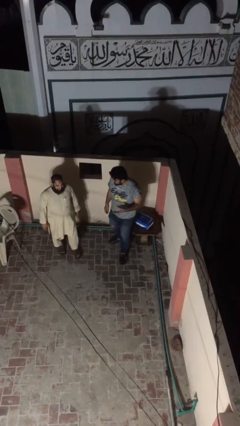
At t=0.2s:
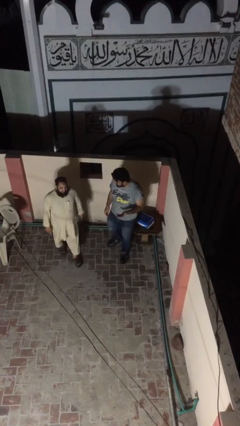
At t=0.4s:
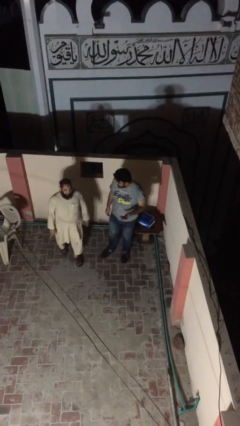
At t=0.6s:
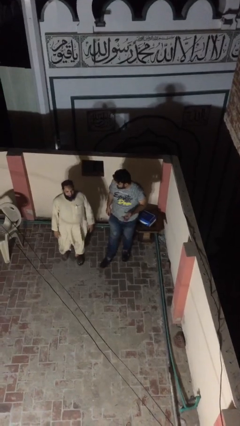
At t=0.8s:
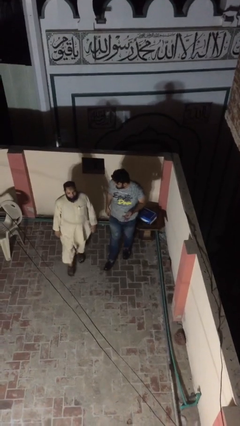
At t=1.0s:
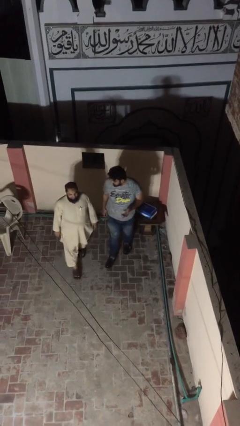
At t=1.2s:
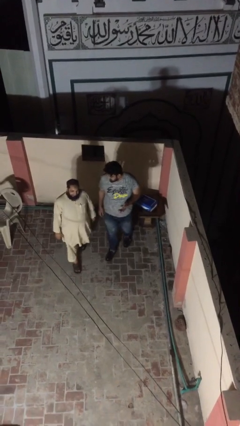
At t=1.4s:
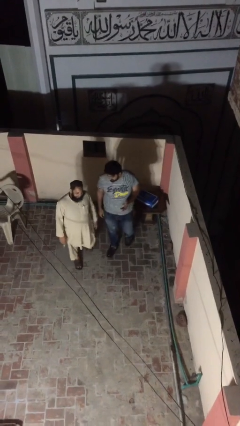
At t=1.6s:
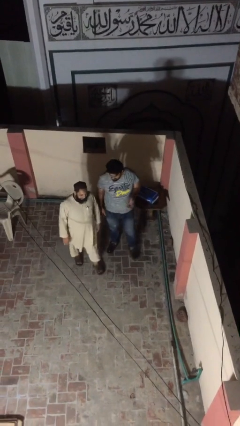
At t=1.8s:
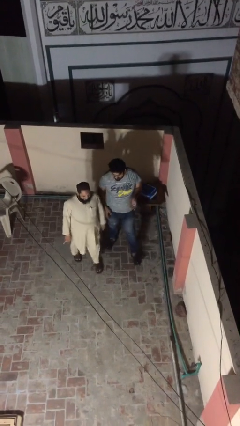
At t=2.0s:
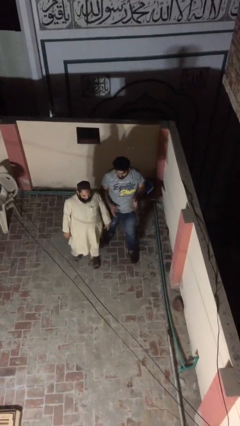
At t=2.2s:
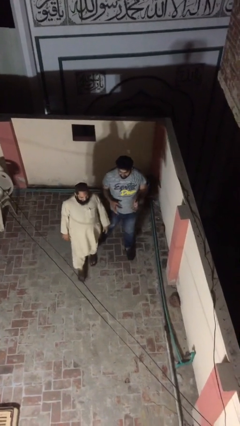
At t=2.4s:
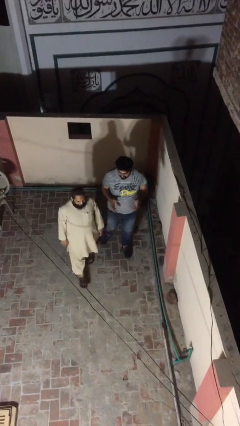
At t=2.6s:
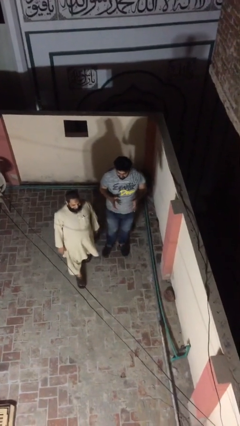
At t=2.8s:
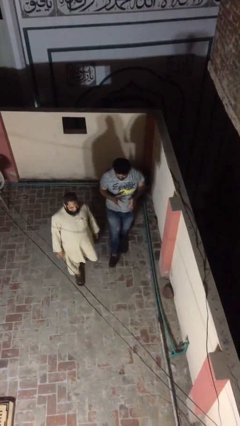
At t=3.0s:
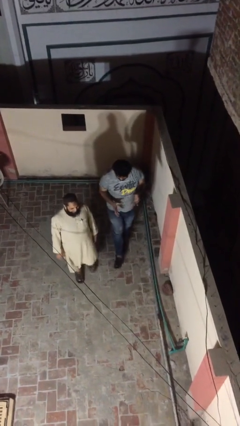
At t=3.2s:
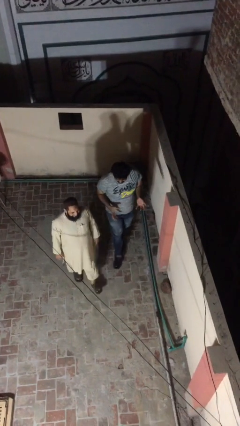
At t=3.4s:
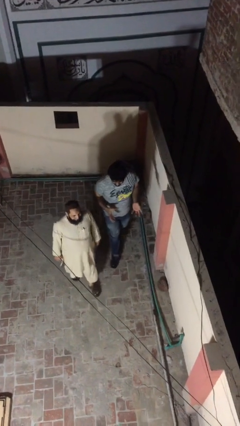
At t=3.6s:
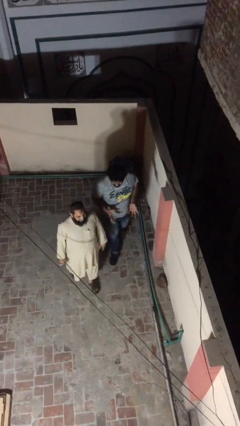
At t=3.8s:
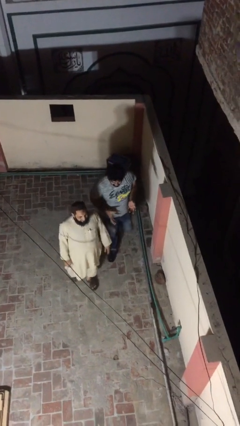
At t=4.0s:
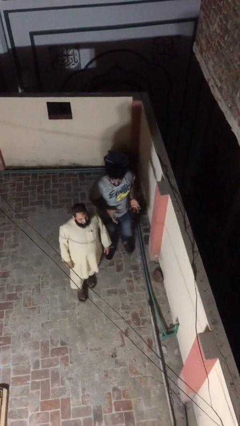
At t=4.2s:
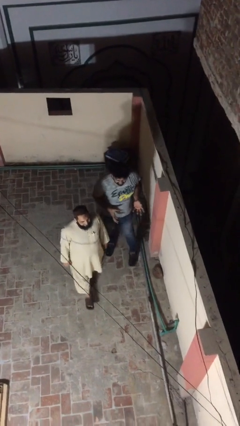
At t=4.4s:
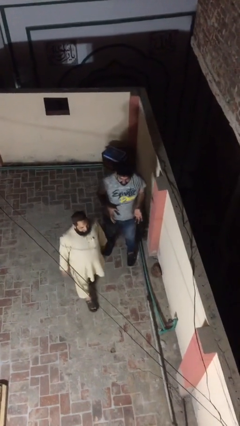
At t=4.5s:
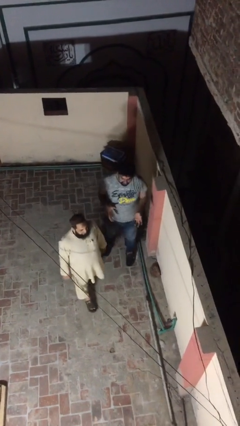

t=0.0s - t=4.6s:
person talks to person

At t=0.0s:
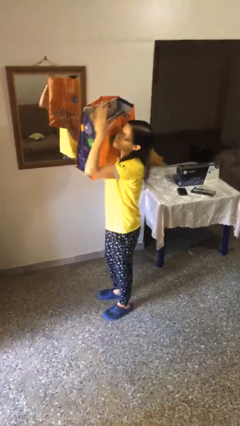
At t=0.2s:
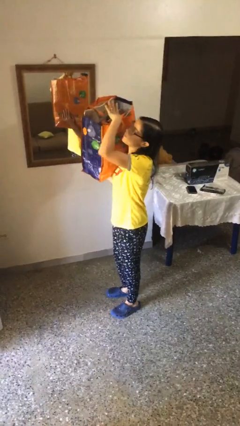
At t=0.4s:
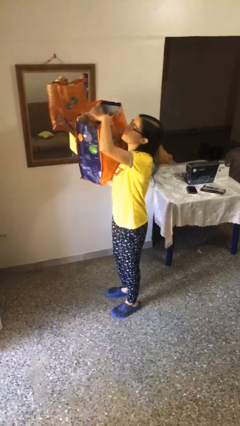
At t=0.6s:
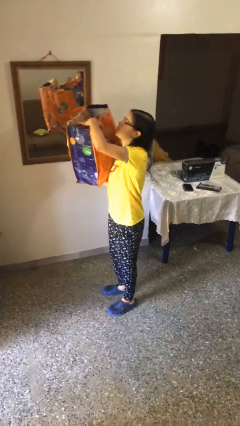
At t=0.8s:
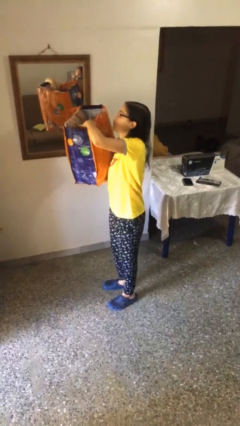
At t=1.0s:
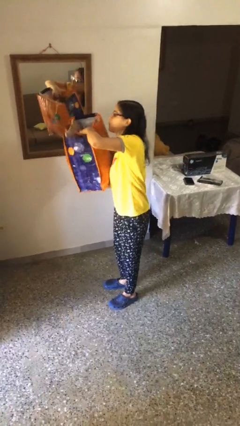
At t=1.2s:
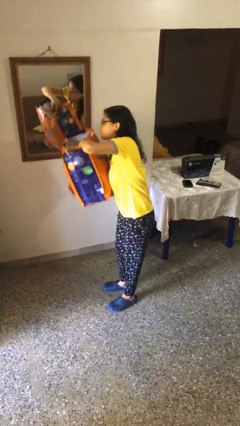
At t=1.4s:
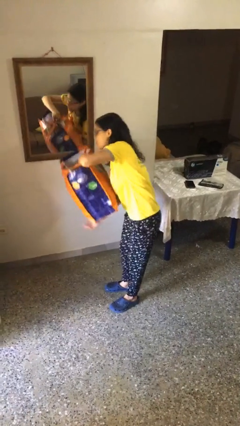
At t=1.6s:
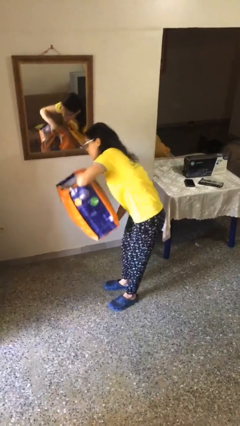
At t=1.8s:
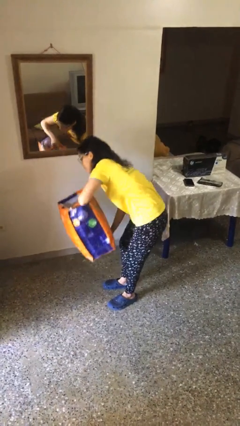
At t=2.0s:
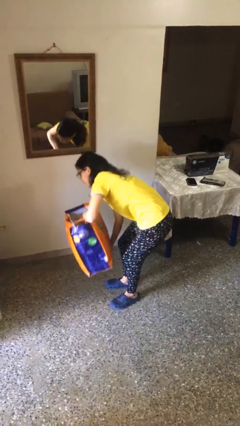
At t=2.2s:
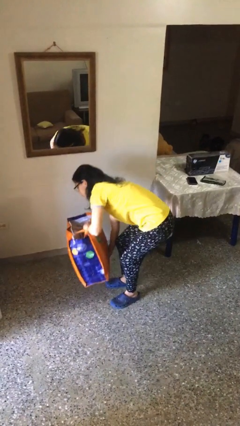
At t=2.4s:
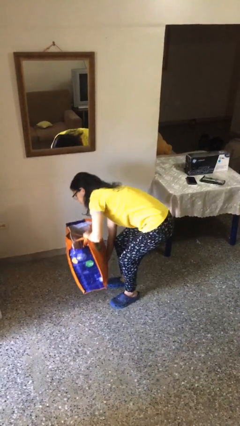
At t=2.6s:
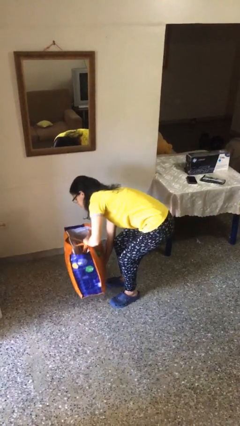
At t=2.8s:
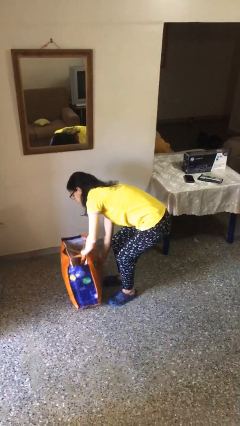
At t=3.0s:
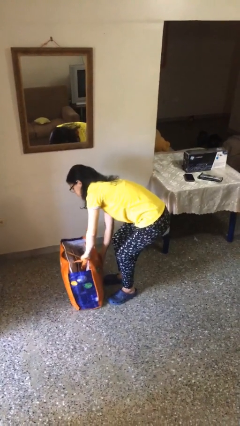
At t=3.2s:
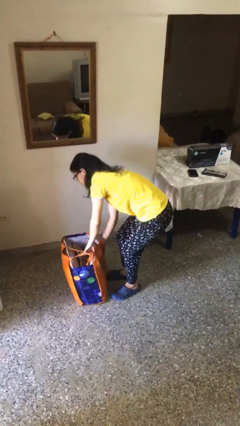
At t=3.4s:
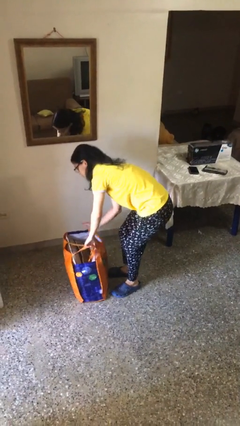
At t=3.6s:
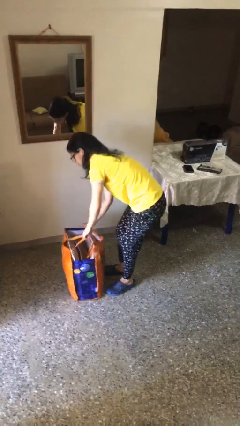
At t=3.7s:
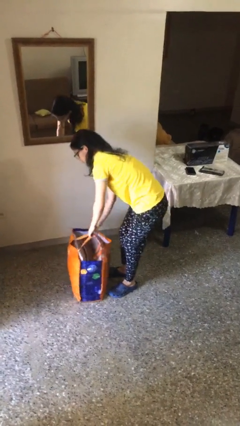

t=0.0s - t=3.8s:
person puts down object on floor

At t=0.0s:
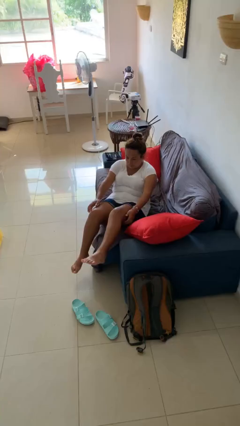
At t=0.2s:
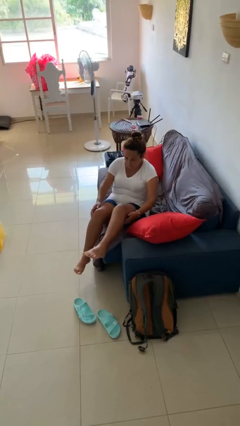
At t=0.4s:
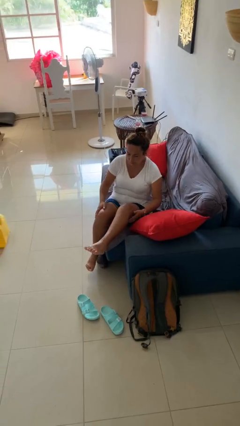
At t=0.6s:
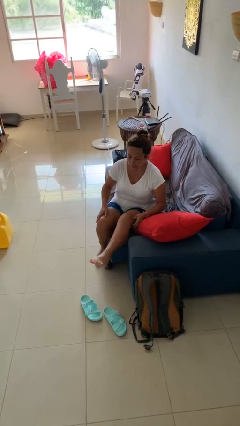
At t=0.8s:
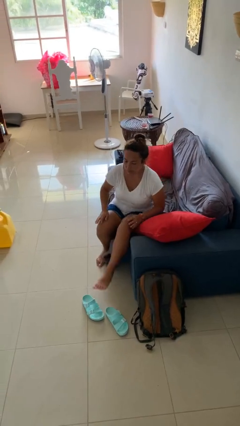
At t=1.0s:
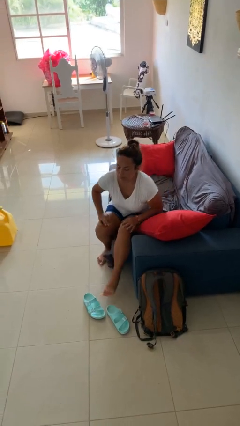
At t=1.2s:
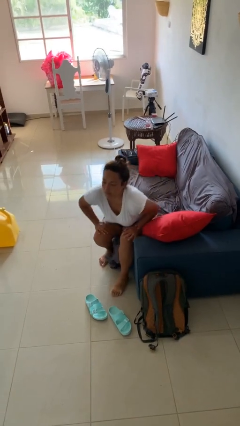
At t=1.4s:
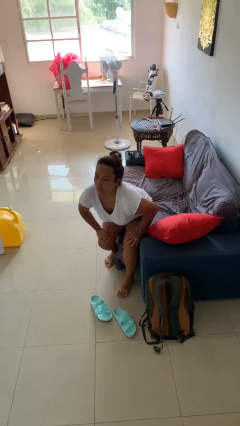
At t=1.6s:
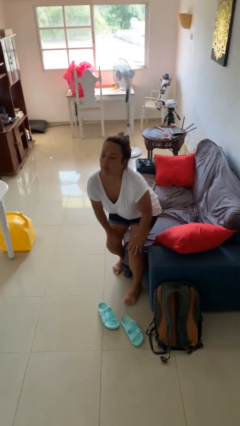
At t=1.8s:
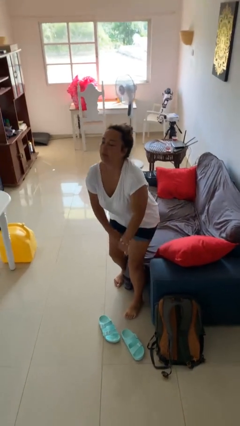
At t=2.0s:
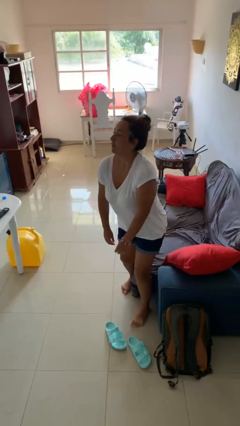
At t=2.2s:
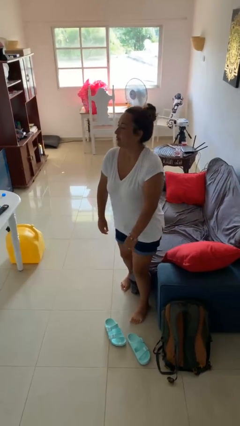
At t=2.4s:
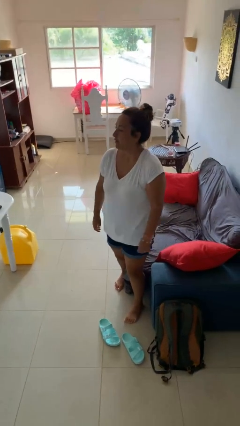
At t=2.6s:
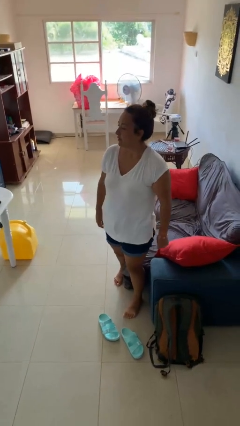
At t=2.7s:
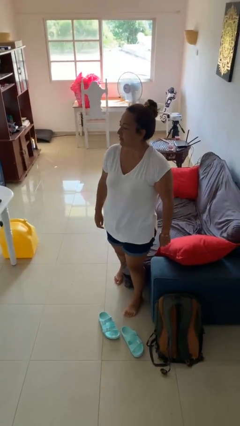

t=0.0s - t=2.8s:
person stands up

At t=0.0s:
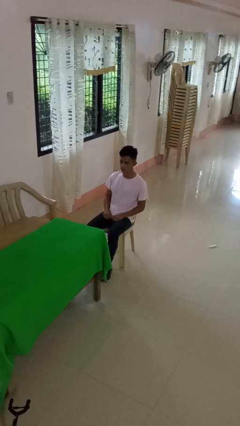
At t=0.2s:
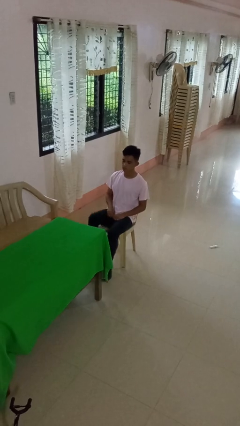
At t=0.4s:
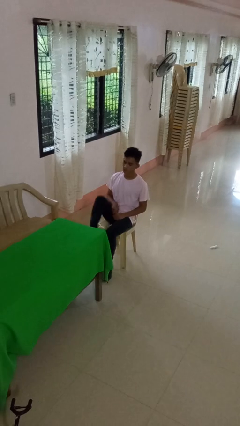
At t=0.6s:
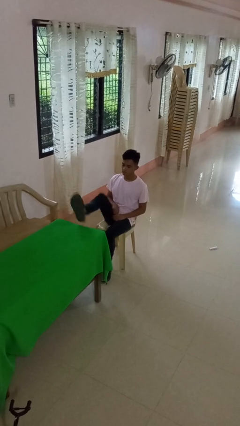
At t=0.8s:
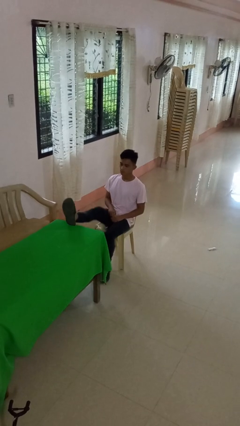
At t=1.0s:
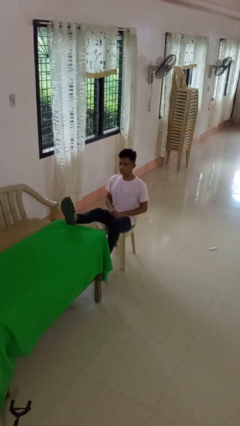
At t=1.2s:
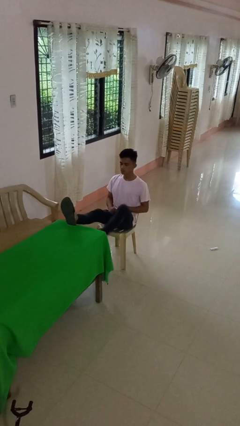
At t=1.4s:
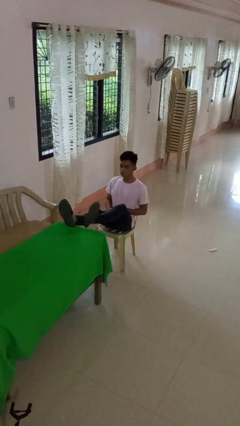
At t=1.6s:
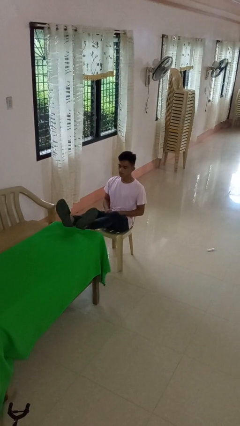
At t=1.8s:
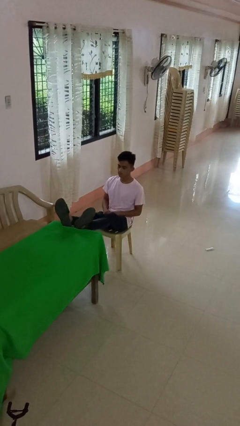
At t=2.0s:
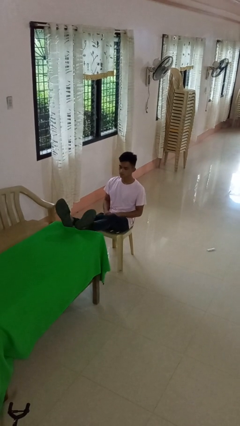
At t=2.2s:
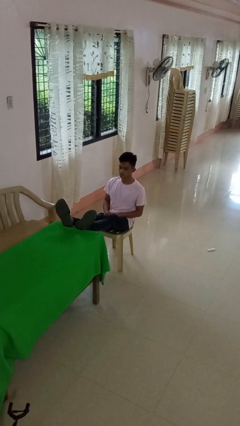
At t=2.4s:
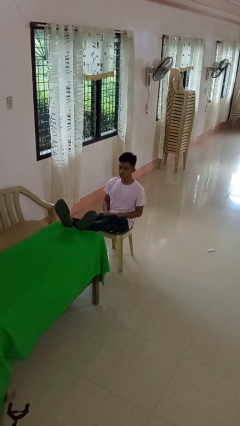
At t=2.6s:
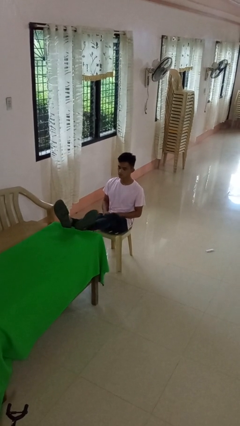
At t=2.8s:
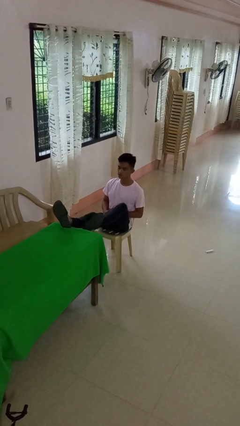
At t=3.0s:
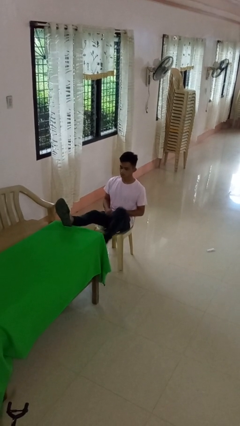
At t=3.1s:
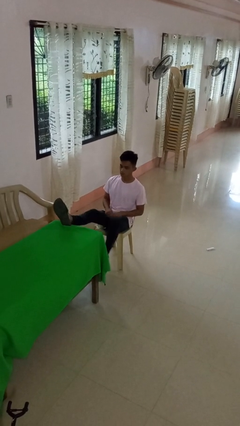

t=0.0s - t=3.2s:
person puts feet up

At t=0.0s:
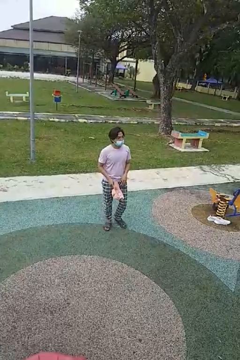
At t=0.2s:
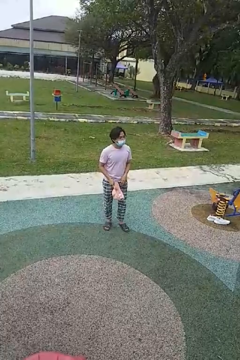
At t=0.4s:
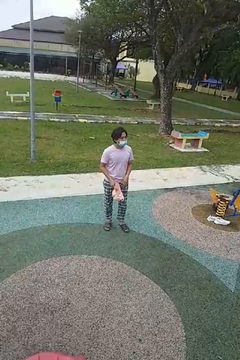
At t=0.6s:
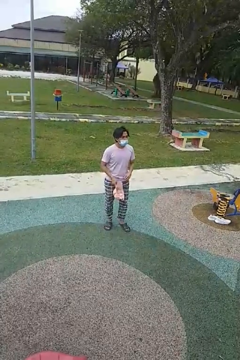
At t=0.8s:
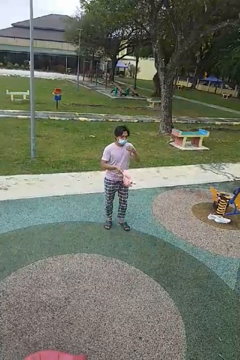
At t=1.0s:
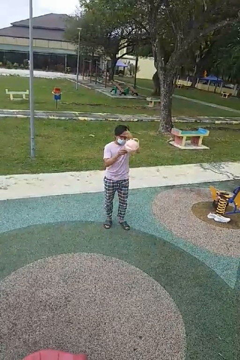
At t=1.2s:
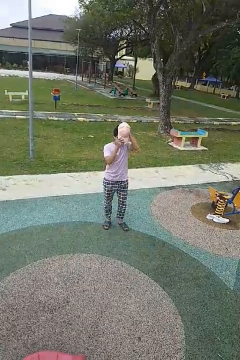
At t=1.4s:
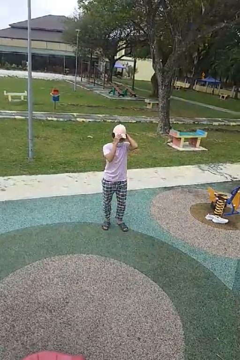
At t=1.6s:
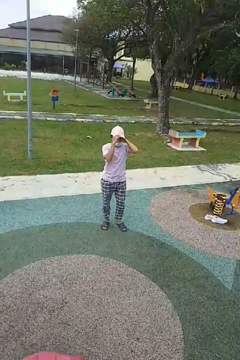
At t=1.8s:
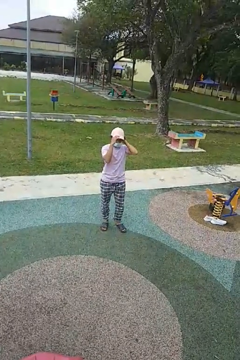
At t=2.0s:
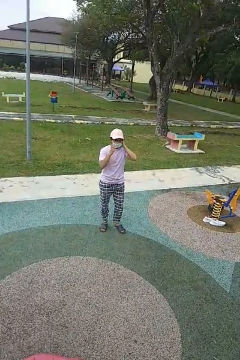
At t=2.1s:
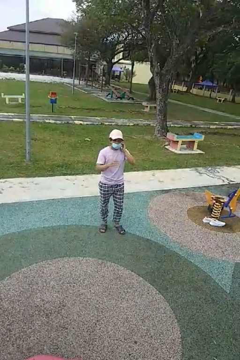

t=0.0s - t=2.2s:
person puts on hat

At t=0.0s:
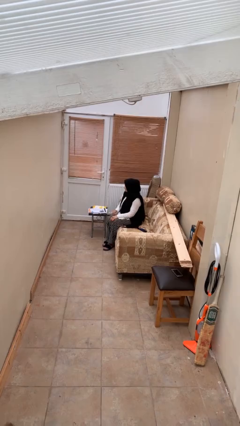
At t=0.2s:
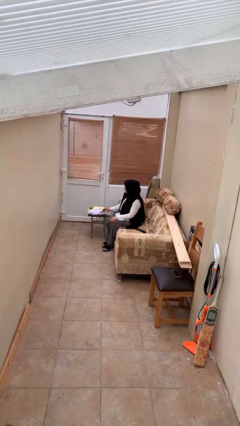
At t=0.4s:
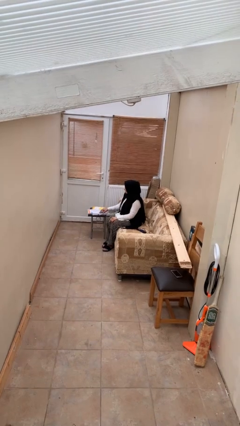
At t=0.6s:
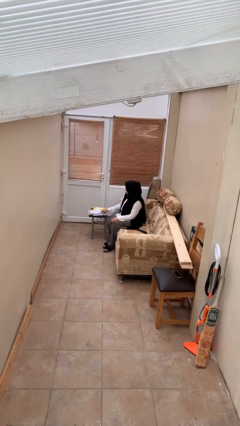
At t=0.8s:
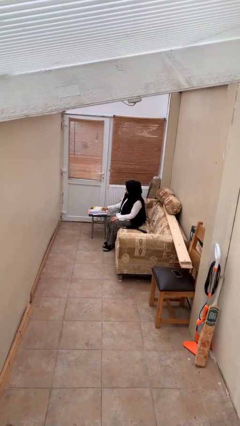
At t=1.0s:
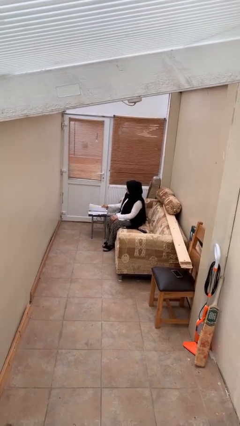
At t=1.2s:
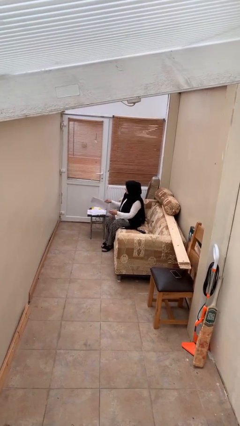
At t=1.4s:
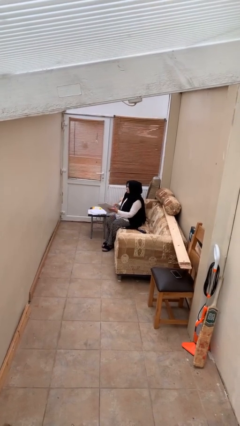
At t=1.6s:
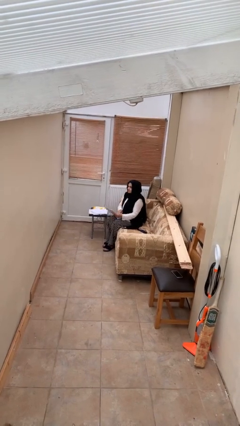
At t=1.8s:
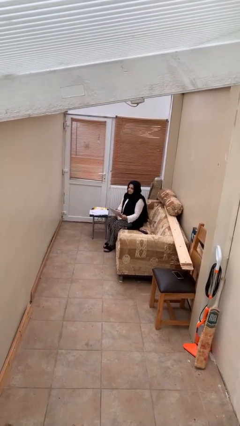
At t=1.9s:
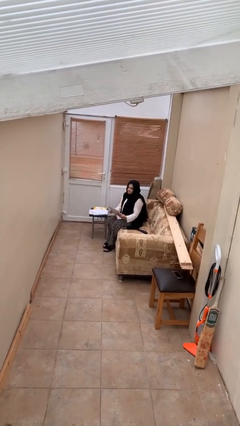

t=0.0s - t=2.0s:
person picks up object from table
